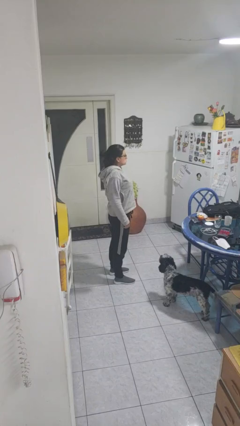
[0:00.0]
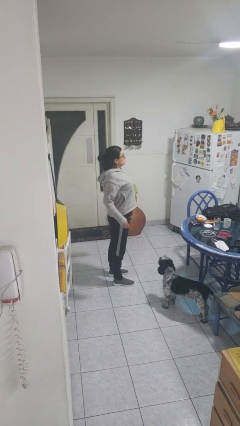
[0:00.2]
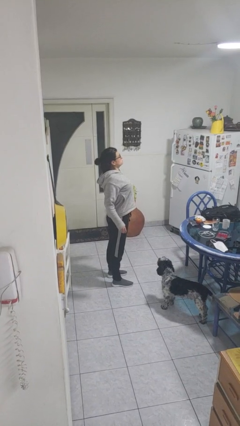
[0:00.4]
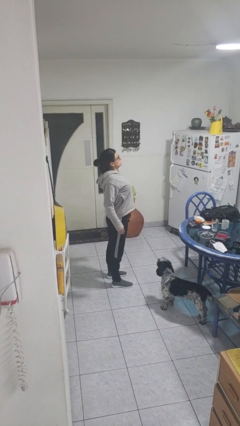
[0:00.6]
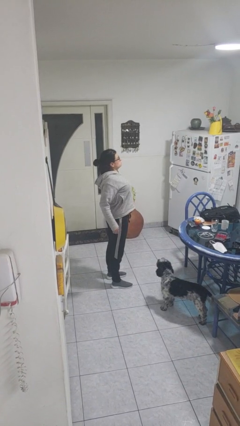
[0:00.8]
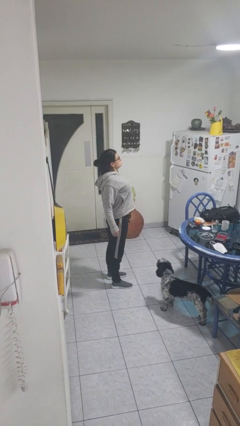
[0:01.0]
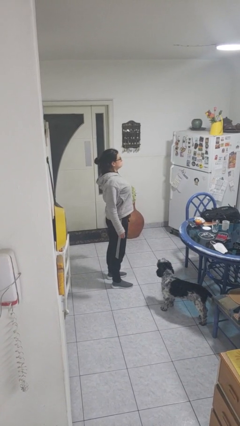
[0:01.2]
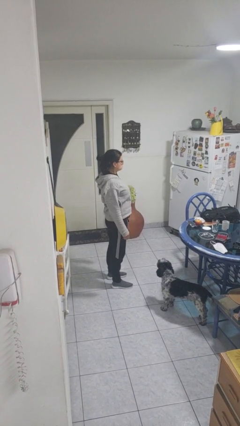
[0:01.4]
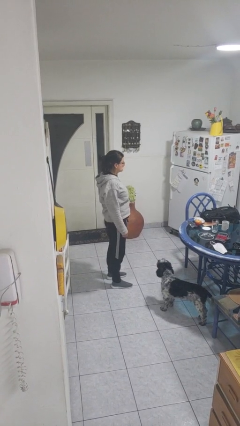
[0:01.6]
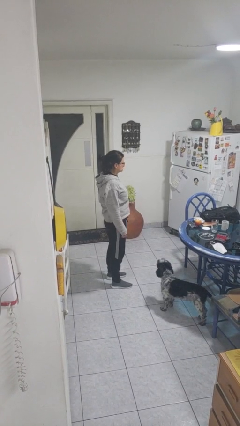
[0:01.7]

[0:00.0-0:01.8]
person stretches back

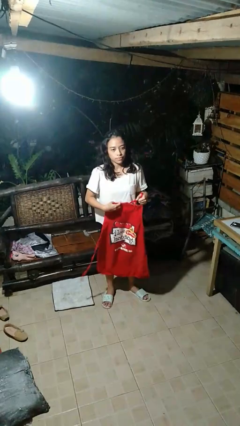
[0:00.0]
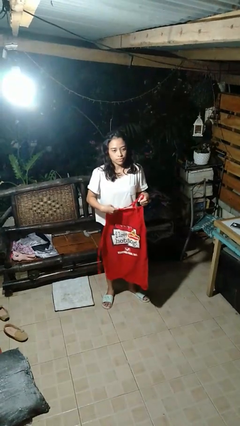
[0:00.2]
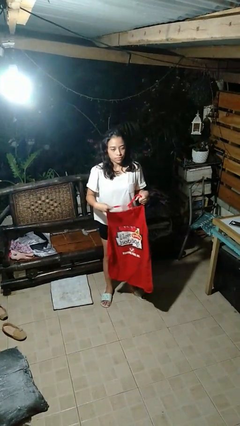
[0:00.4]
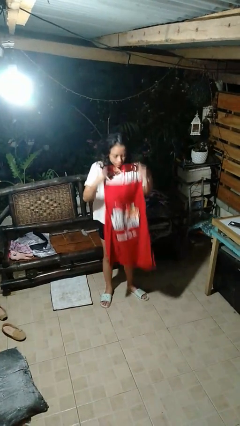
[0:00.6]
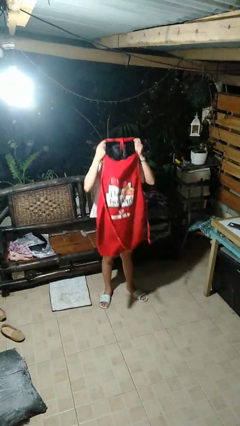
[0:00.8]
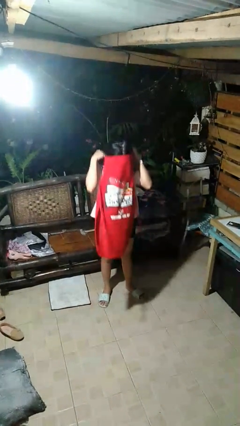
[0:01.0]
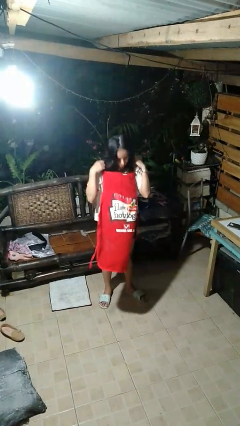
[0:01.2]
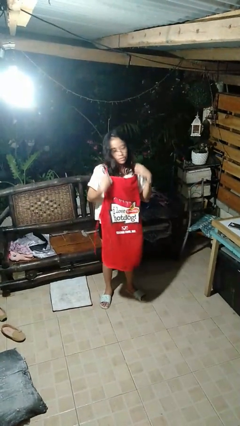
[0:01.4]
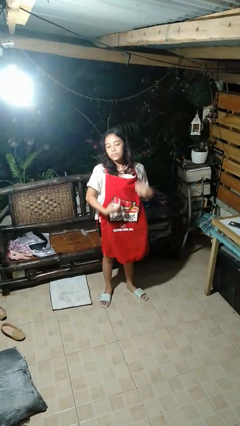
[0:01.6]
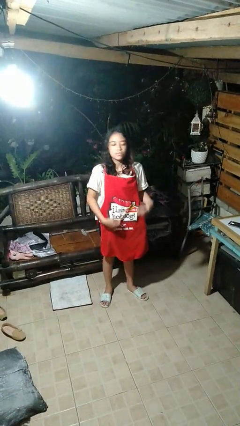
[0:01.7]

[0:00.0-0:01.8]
person puts on apron

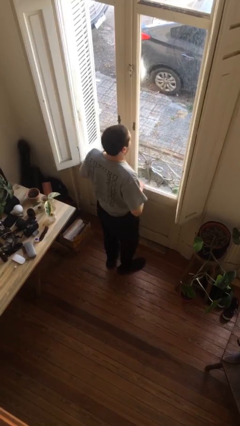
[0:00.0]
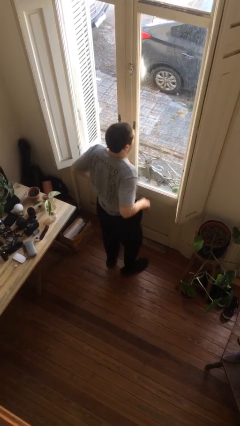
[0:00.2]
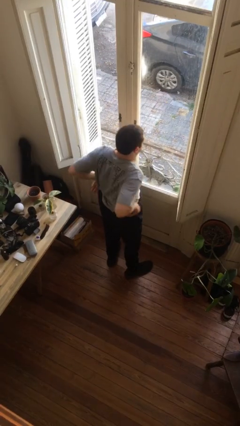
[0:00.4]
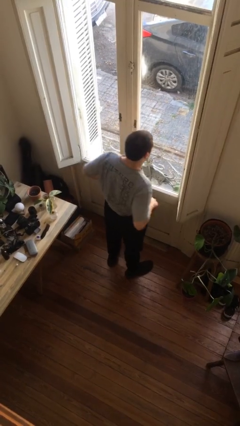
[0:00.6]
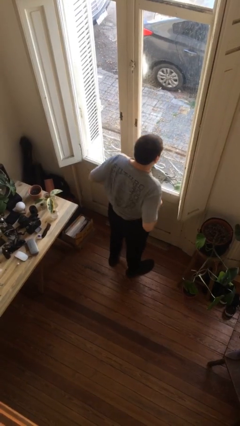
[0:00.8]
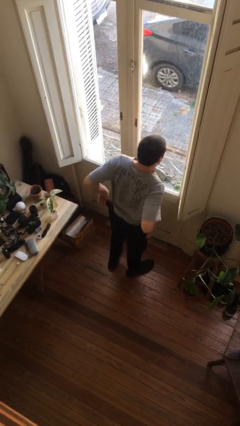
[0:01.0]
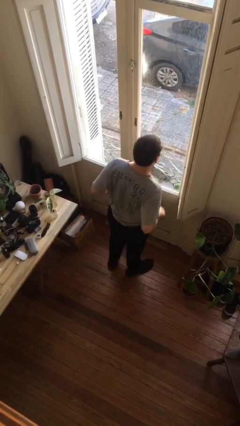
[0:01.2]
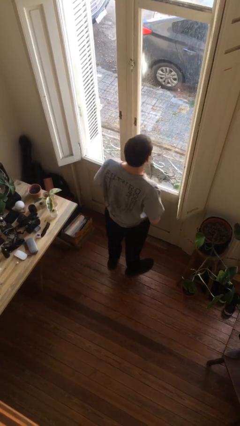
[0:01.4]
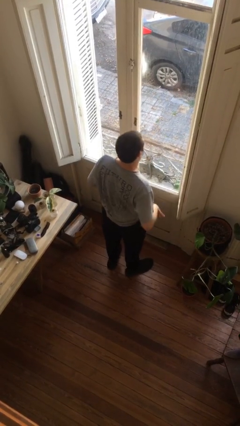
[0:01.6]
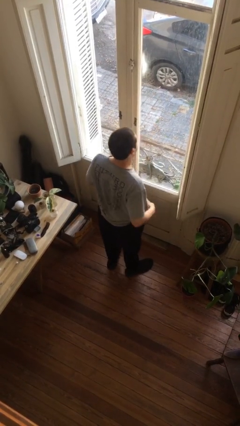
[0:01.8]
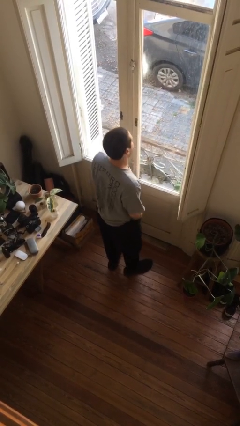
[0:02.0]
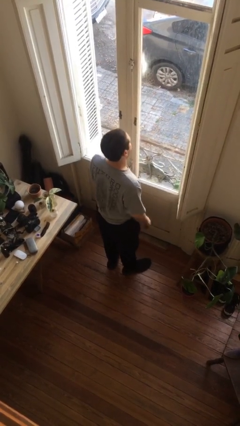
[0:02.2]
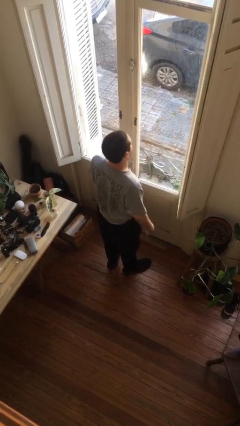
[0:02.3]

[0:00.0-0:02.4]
person hikes up pants

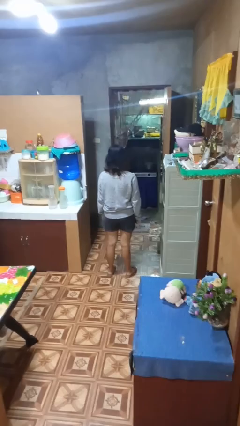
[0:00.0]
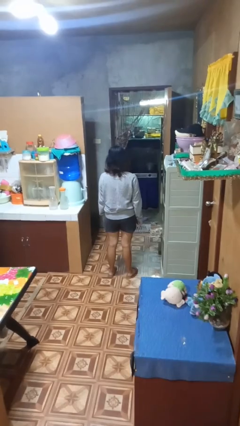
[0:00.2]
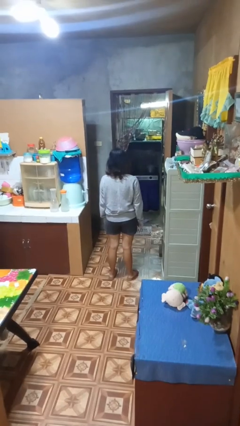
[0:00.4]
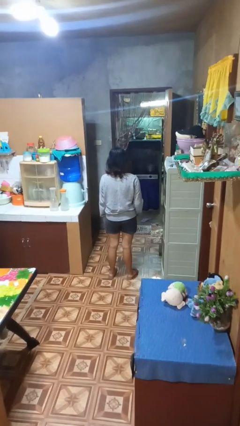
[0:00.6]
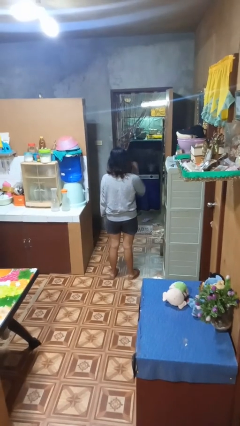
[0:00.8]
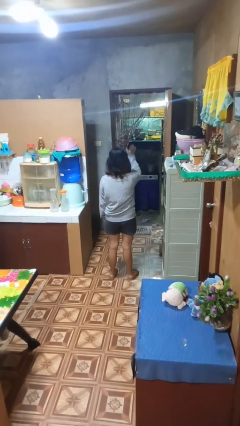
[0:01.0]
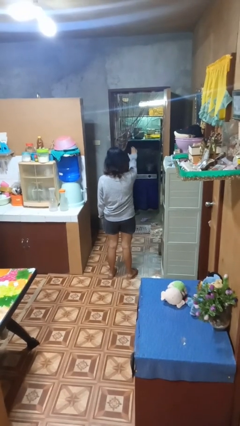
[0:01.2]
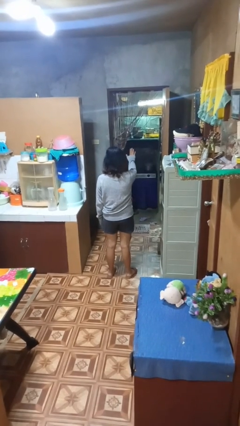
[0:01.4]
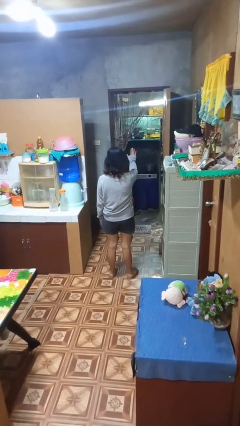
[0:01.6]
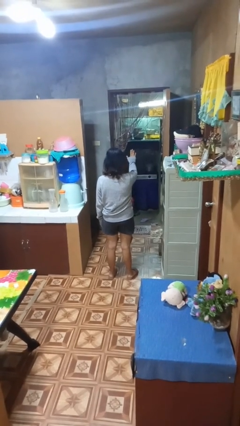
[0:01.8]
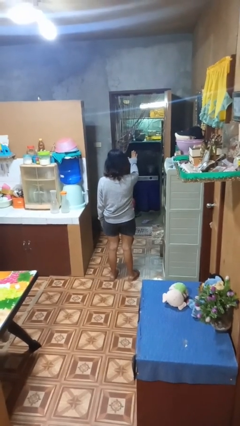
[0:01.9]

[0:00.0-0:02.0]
person gestures stop

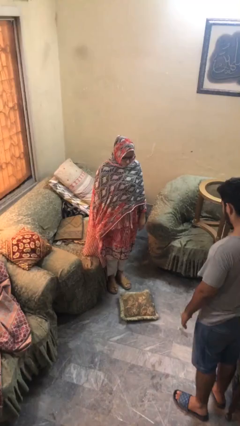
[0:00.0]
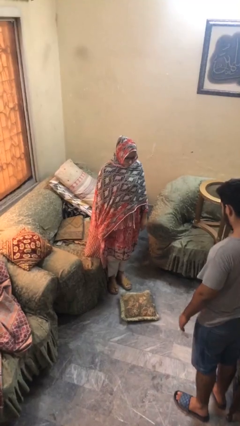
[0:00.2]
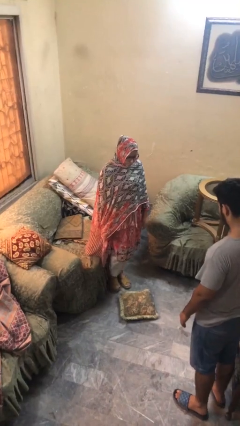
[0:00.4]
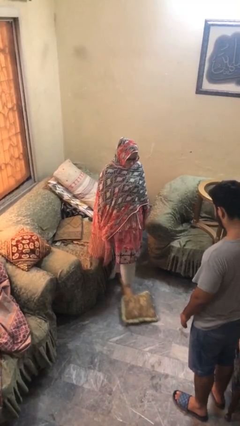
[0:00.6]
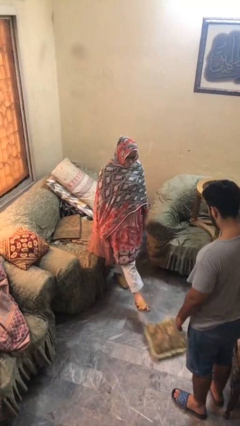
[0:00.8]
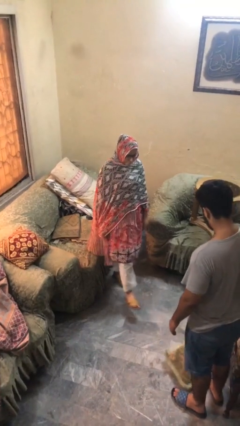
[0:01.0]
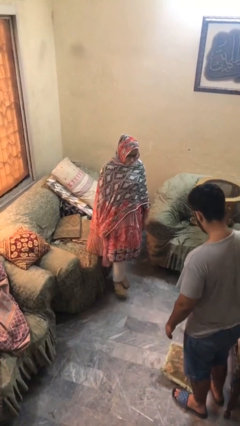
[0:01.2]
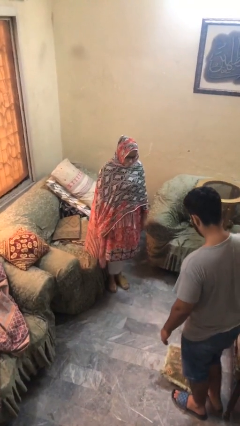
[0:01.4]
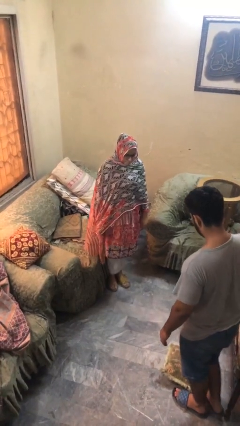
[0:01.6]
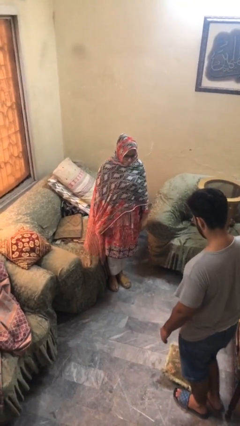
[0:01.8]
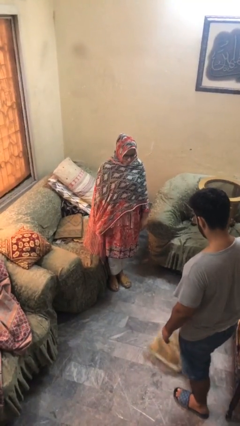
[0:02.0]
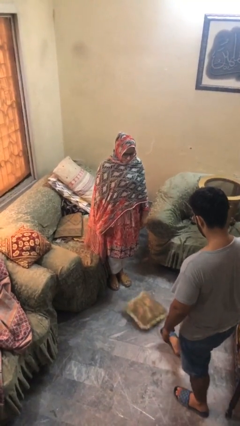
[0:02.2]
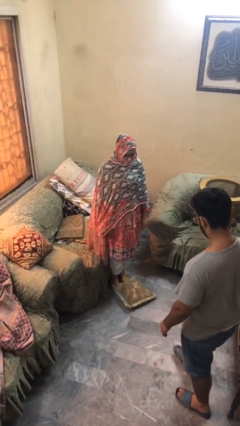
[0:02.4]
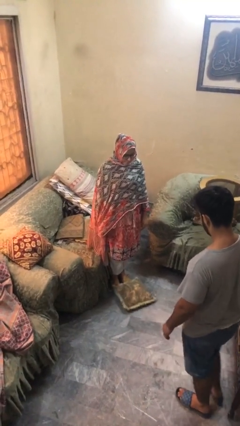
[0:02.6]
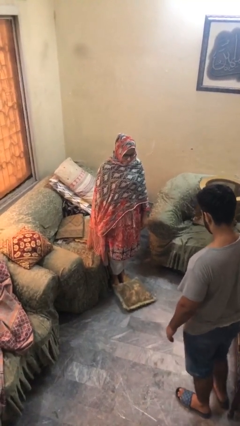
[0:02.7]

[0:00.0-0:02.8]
person kicks object to person

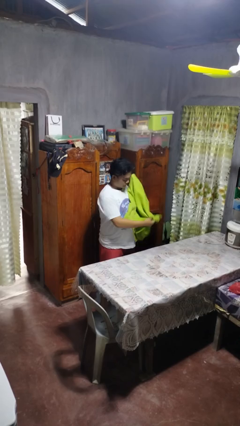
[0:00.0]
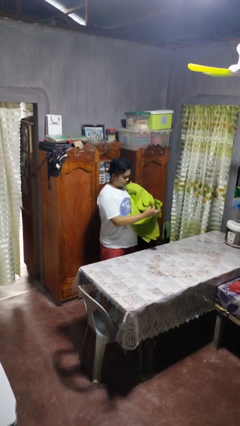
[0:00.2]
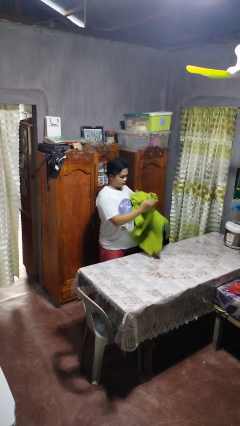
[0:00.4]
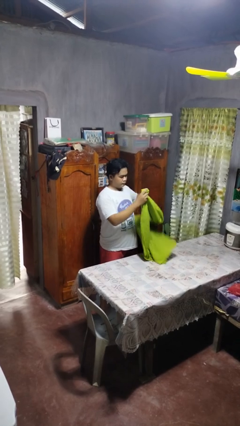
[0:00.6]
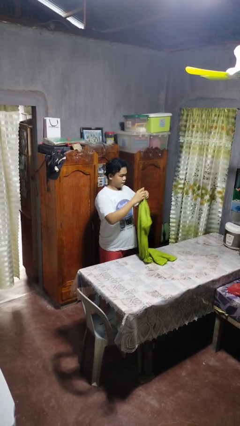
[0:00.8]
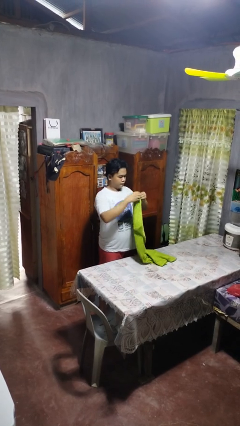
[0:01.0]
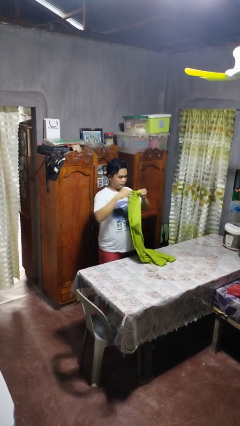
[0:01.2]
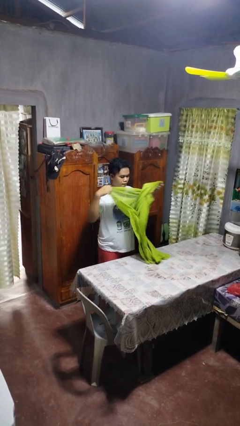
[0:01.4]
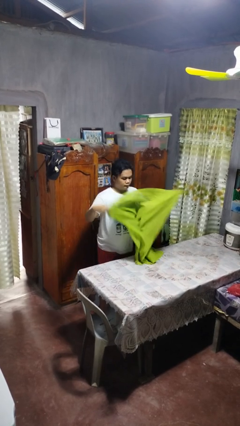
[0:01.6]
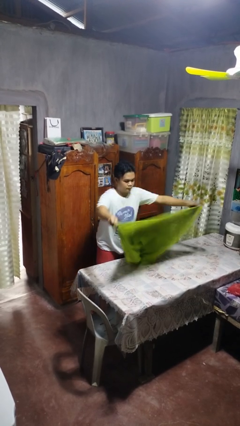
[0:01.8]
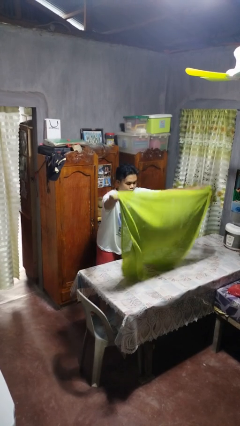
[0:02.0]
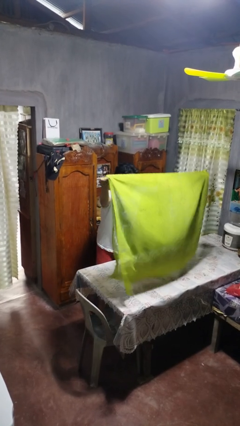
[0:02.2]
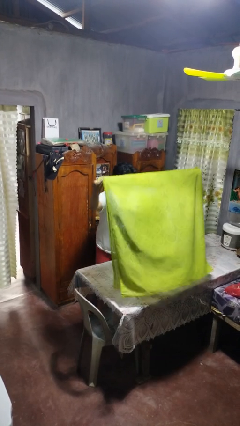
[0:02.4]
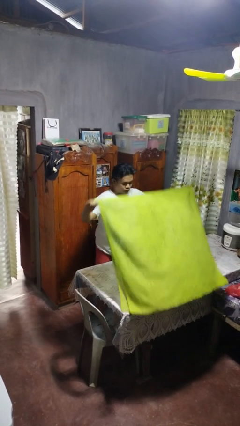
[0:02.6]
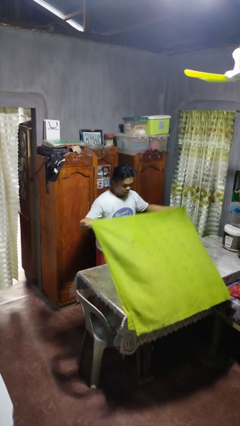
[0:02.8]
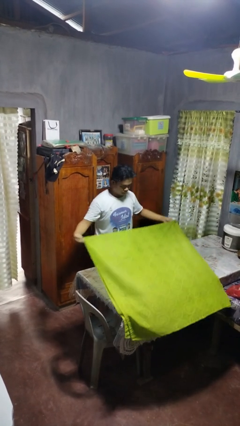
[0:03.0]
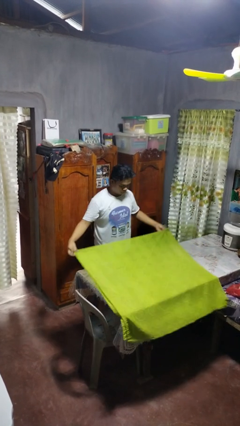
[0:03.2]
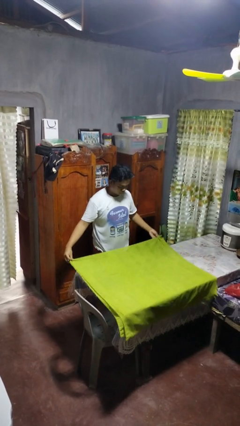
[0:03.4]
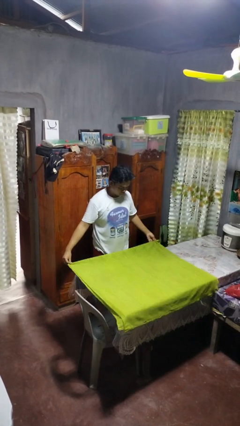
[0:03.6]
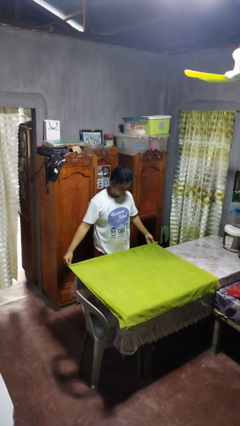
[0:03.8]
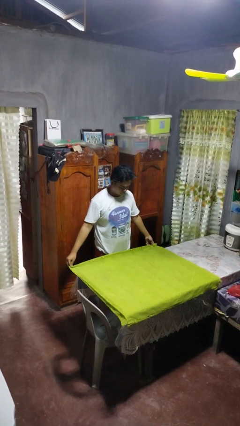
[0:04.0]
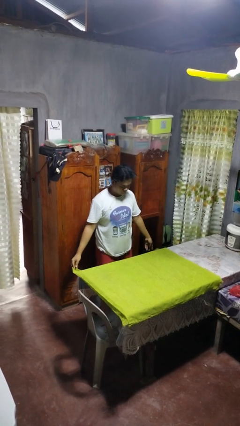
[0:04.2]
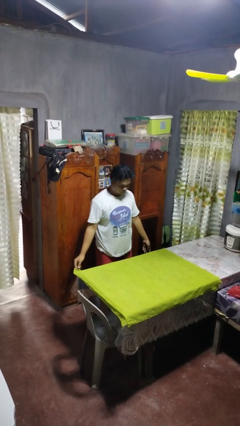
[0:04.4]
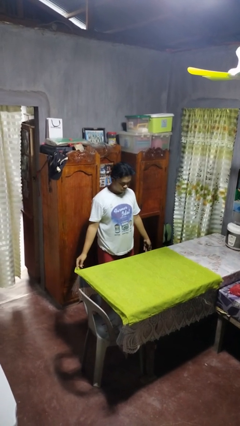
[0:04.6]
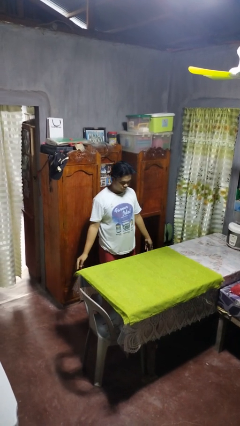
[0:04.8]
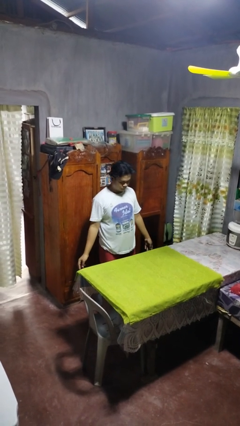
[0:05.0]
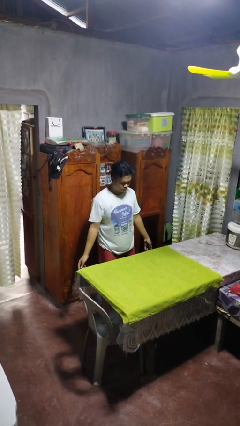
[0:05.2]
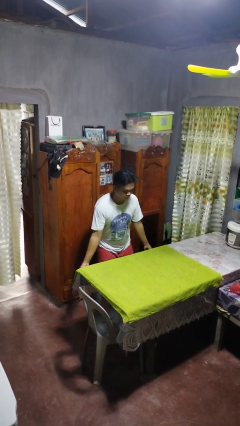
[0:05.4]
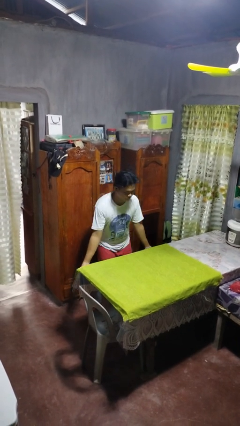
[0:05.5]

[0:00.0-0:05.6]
person spreads tablecloth

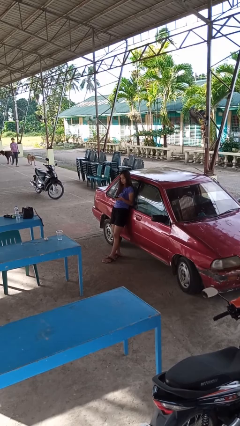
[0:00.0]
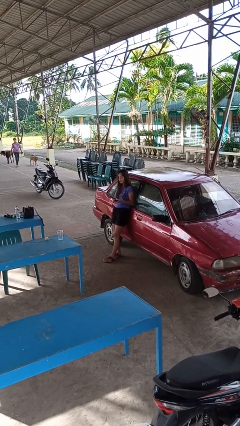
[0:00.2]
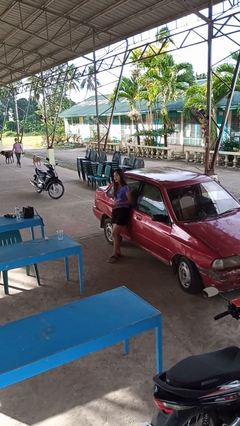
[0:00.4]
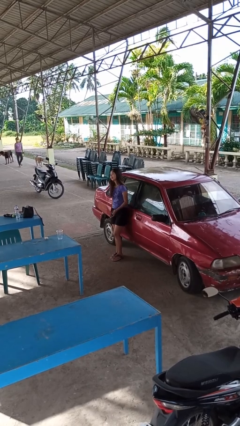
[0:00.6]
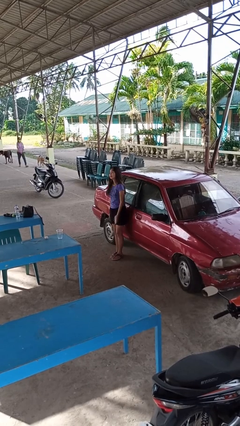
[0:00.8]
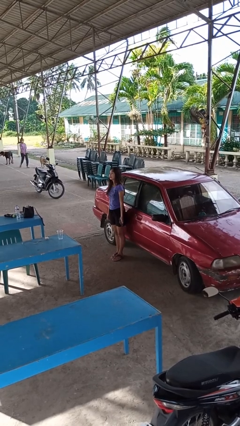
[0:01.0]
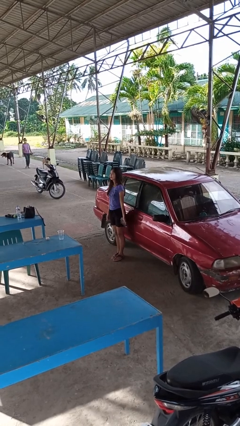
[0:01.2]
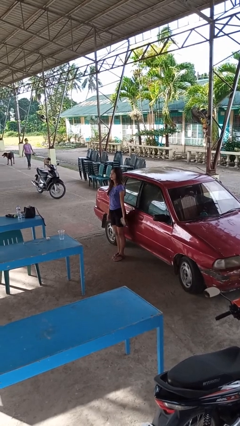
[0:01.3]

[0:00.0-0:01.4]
person leans against car
